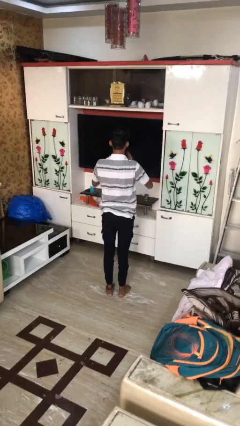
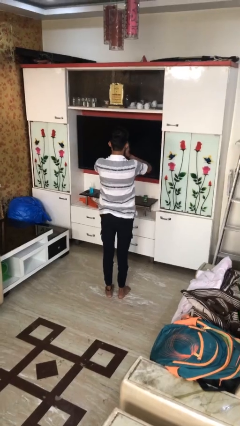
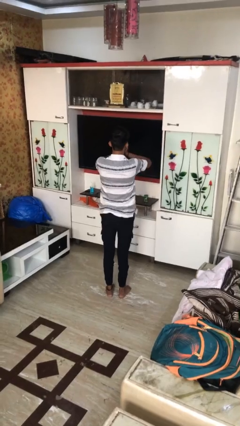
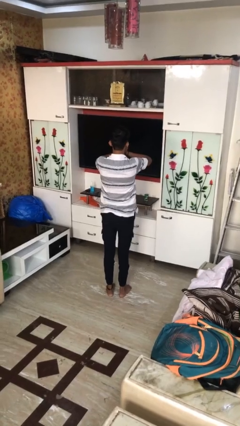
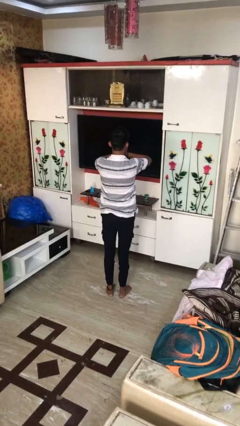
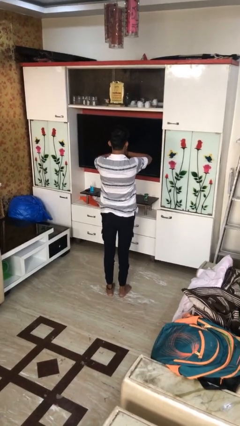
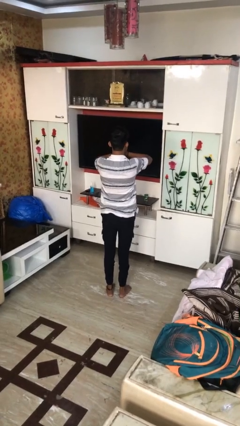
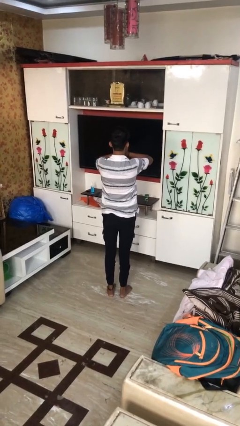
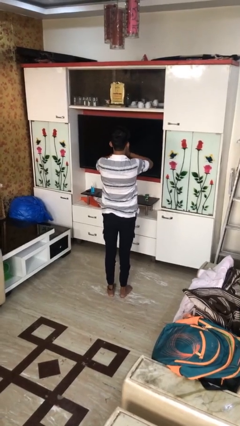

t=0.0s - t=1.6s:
person covers face with hands

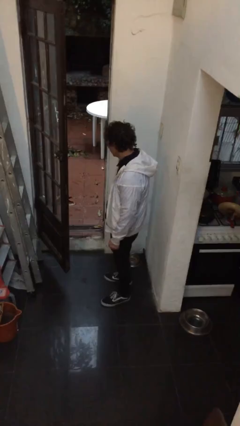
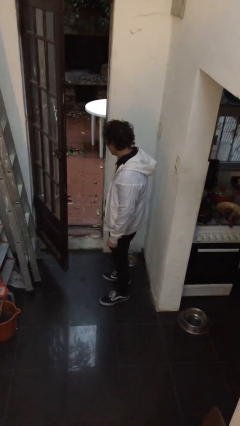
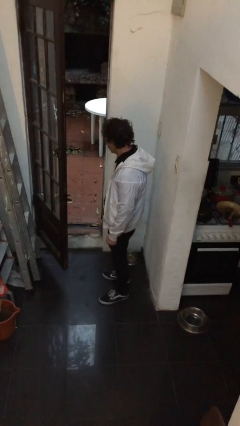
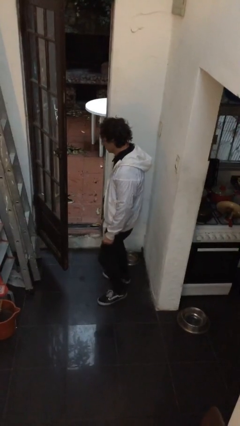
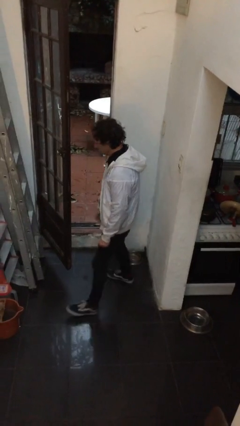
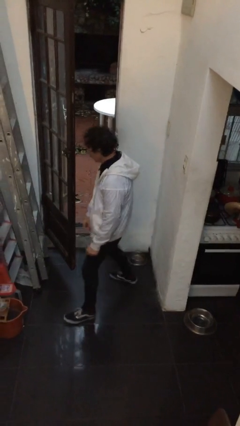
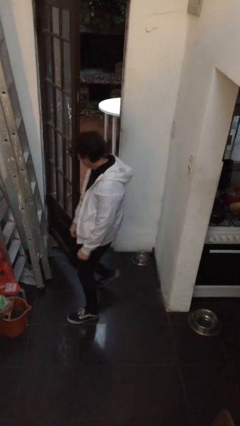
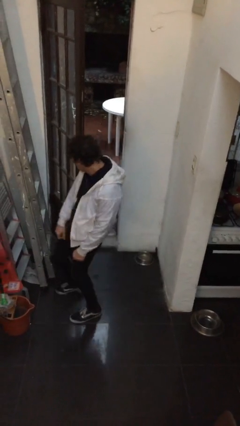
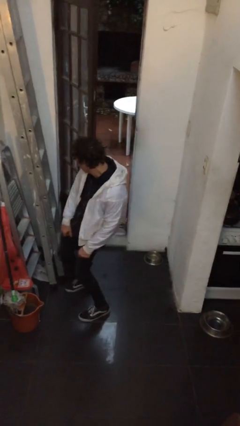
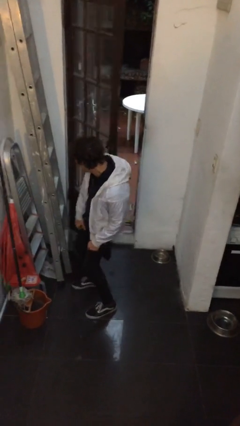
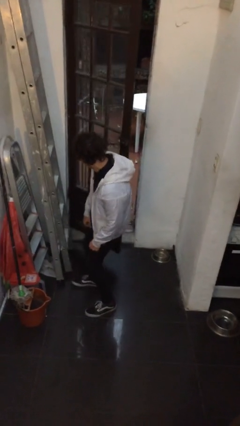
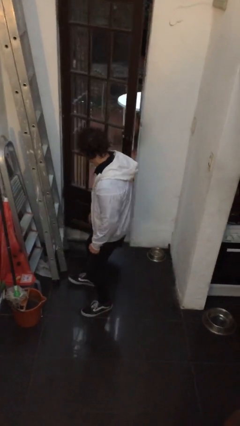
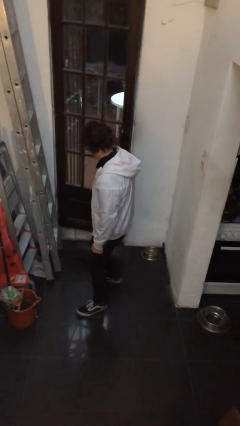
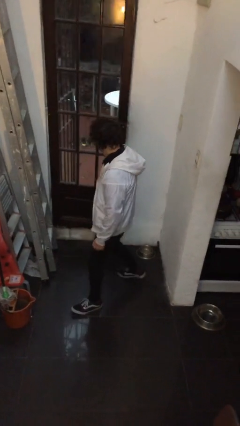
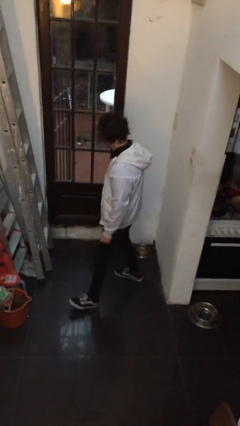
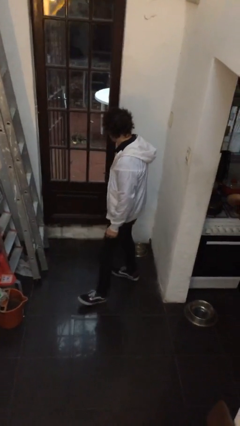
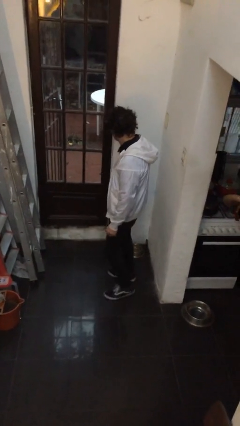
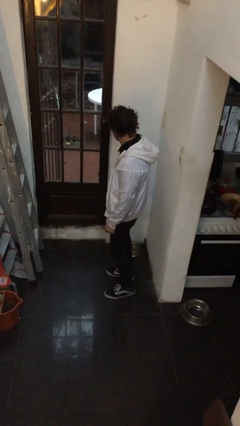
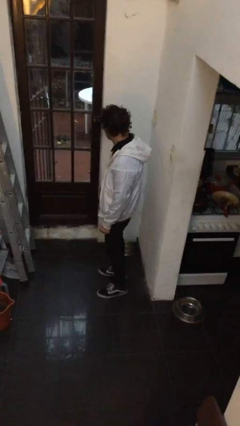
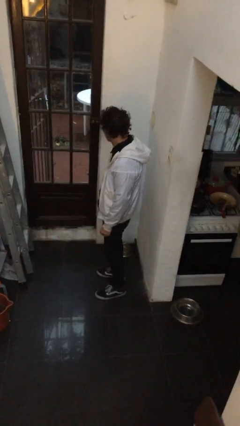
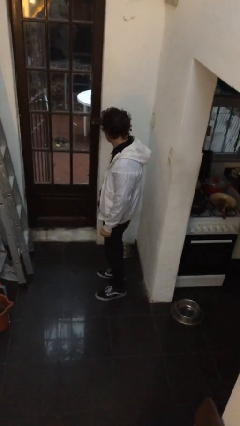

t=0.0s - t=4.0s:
person closes door with hip

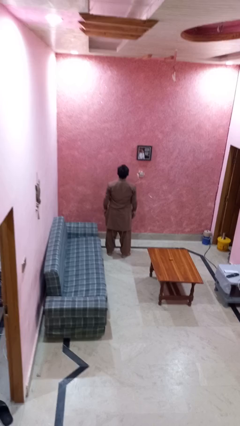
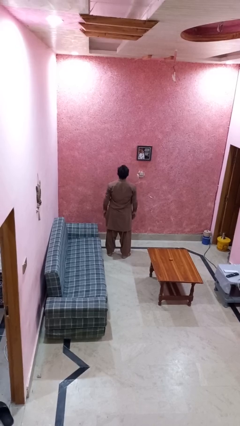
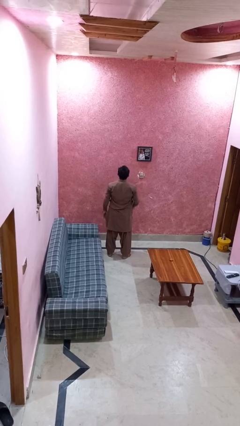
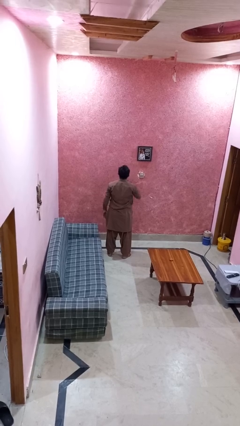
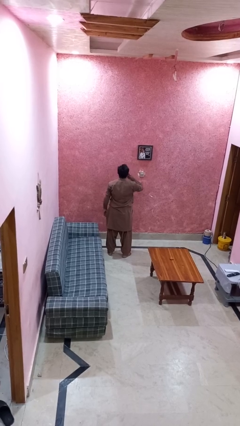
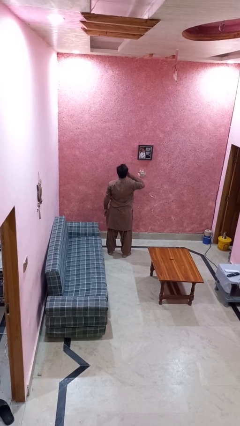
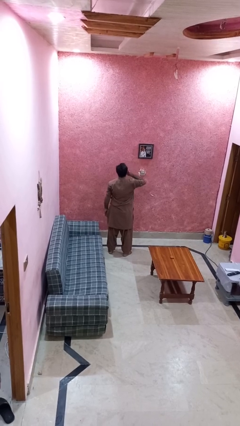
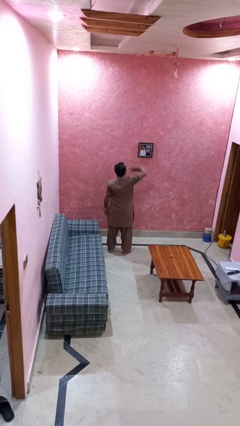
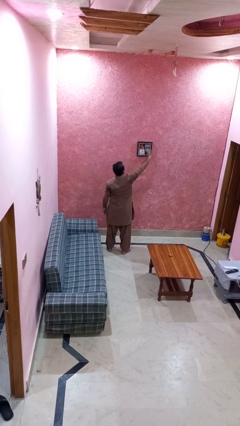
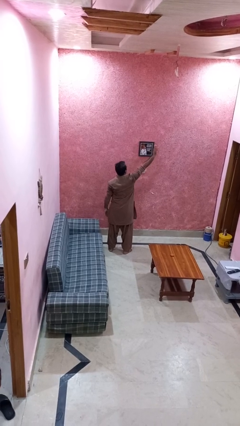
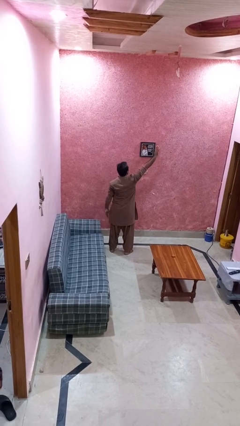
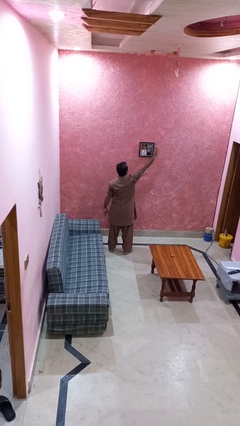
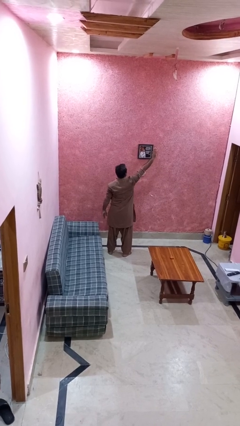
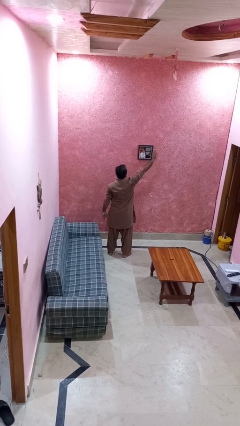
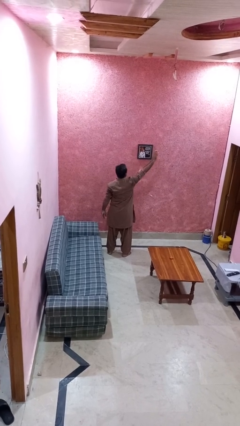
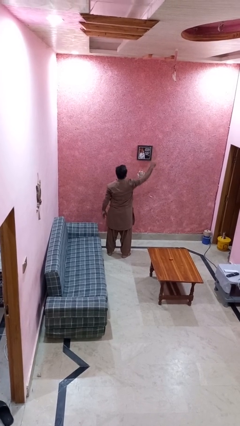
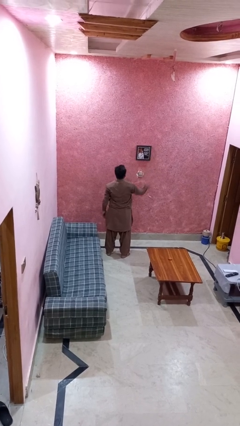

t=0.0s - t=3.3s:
person gestures blow kiss

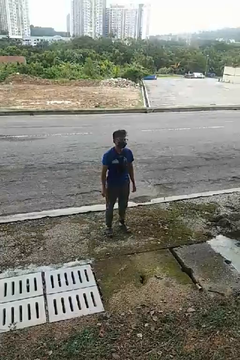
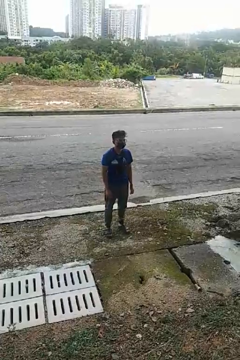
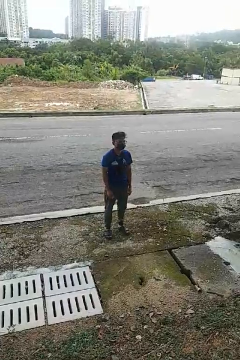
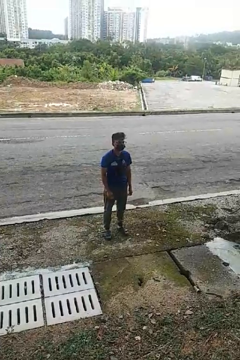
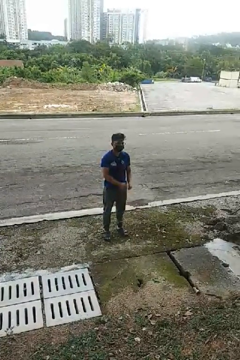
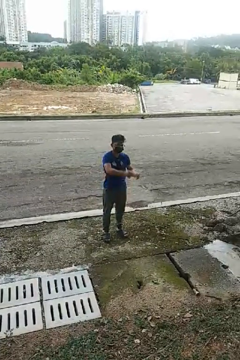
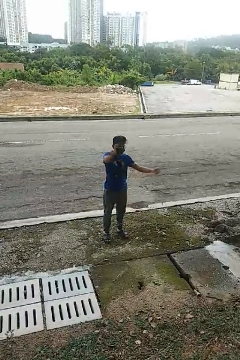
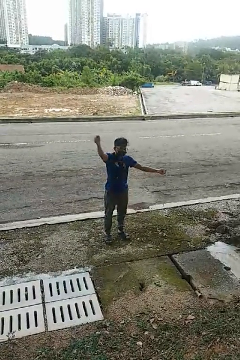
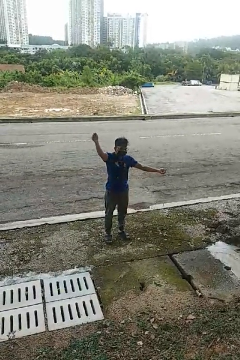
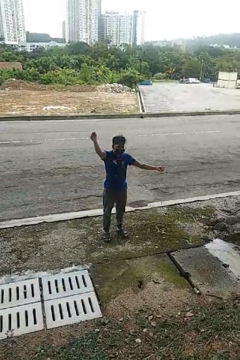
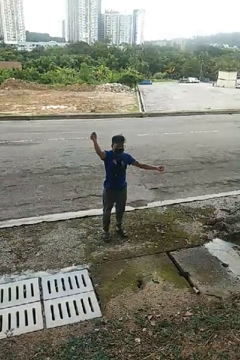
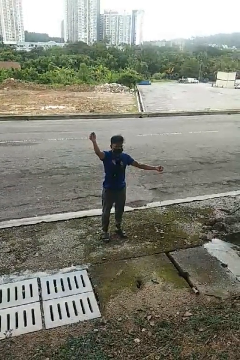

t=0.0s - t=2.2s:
person gestures zoom in

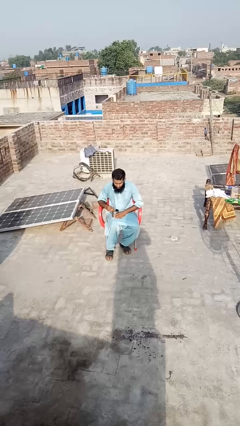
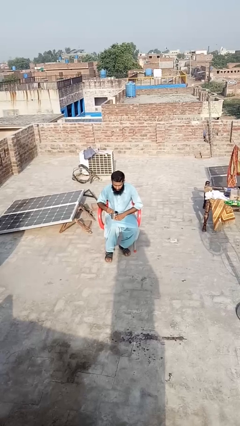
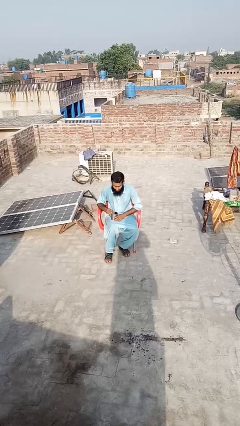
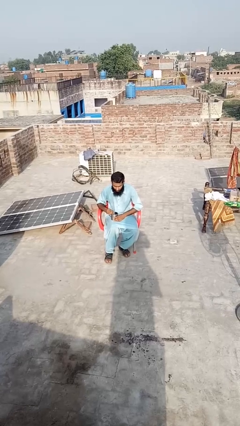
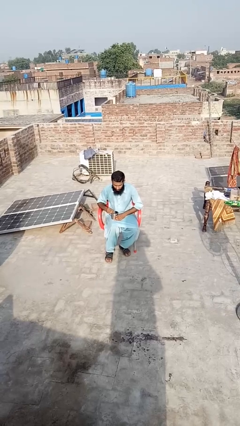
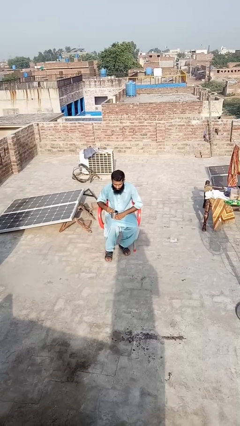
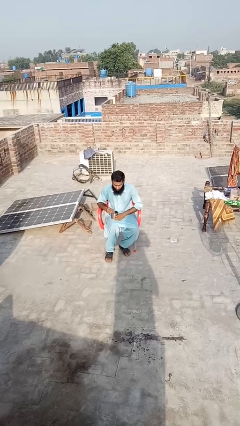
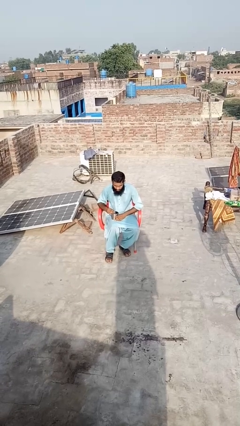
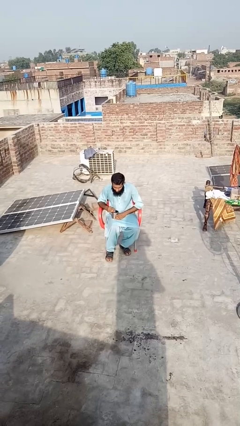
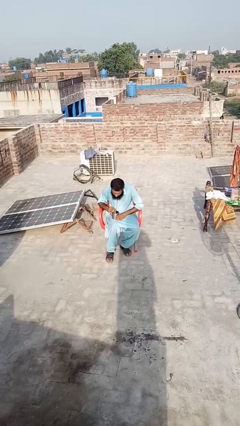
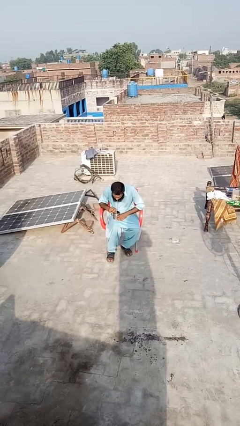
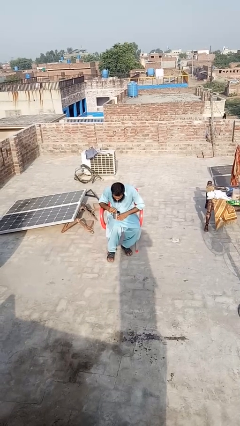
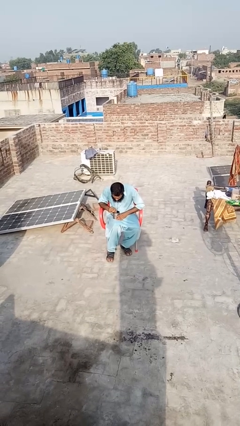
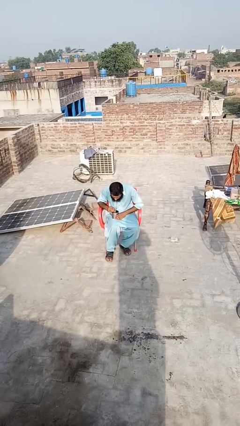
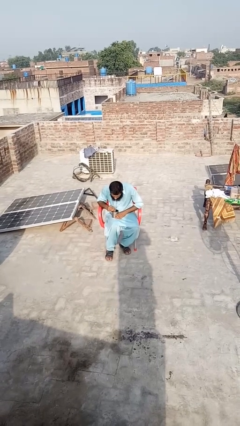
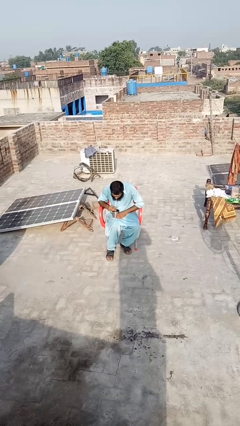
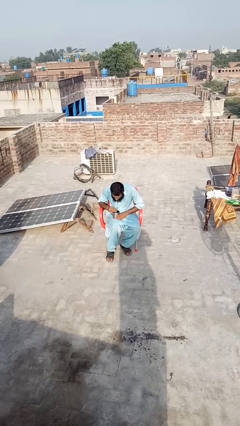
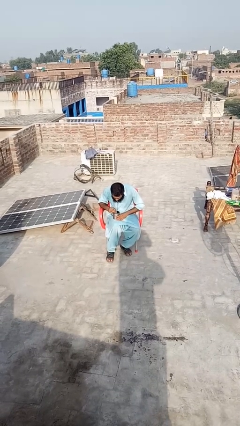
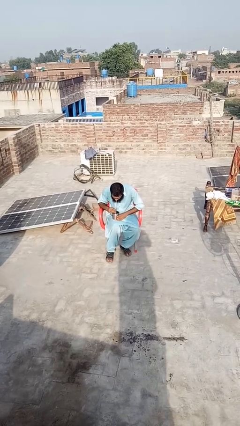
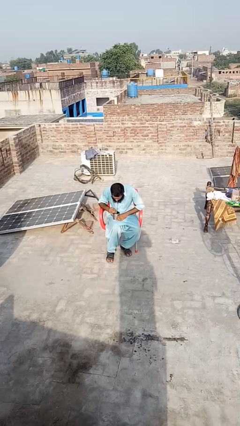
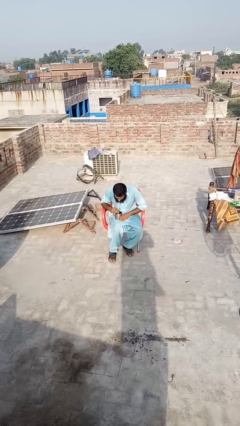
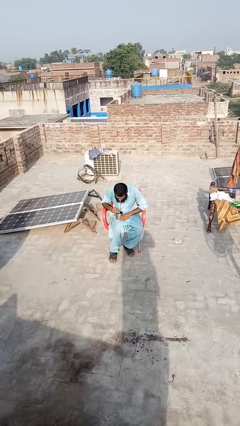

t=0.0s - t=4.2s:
person drinks from straw

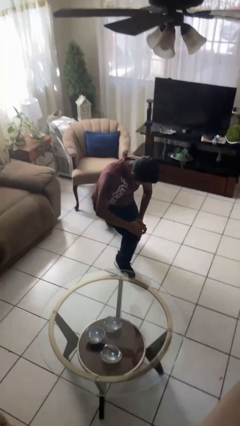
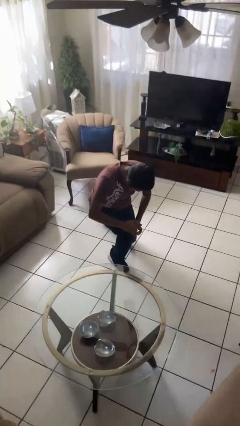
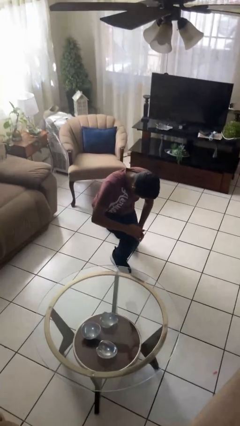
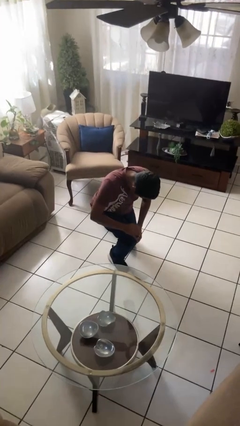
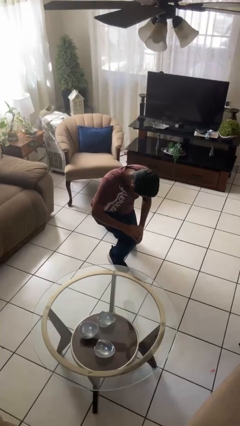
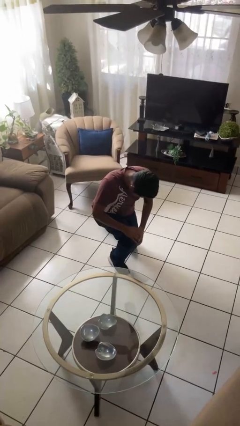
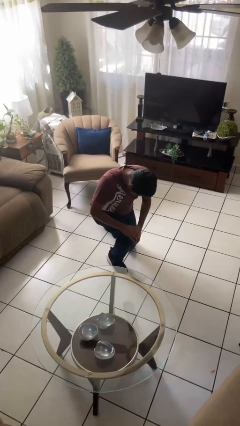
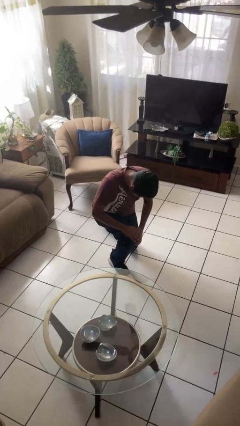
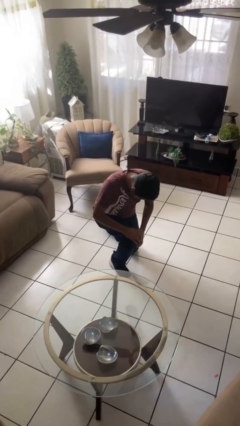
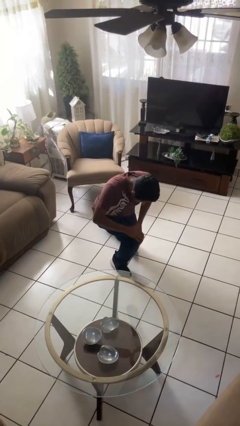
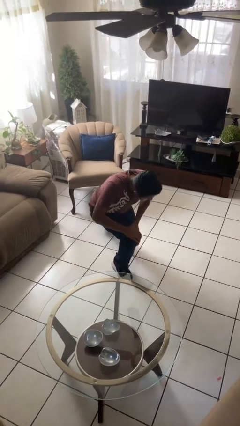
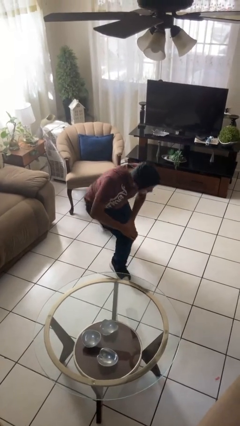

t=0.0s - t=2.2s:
person crawls
